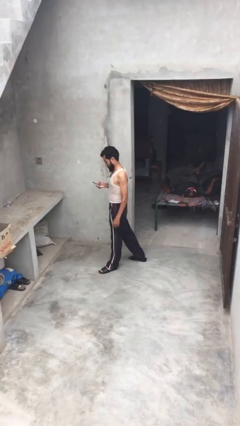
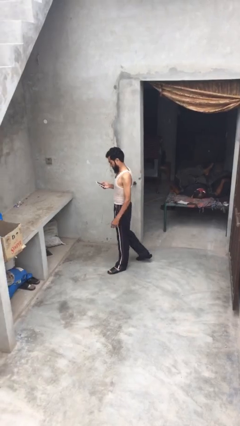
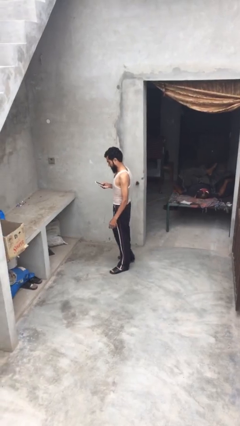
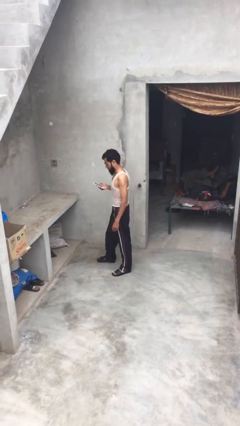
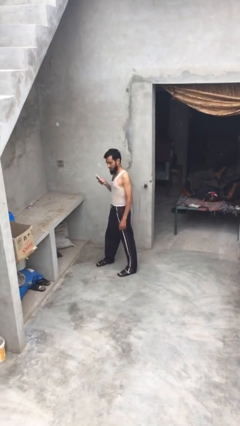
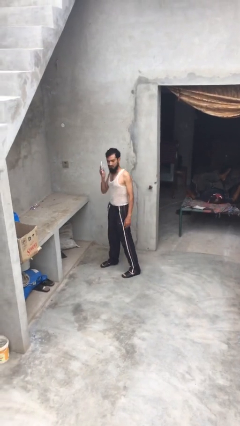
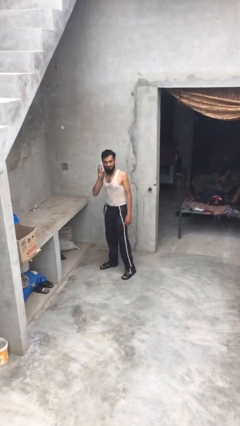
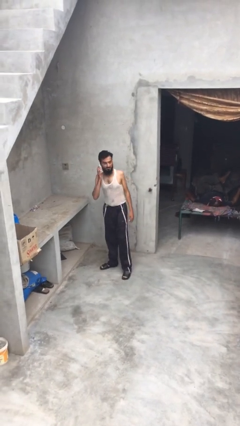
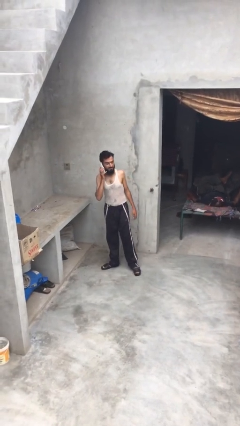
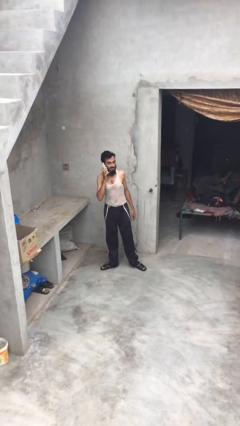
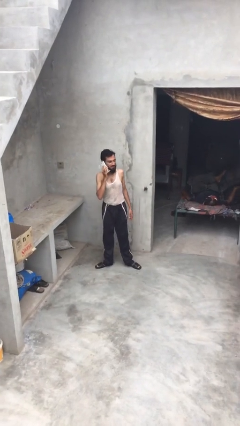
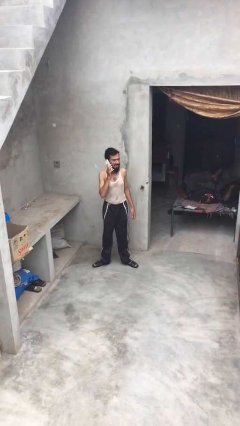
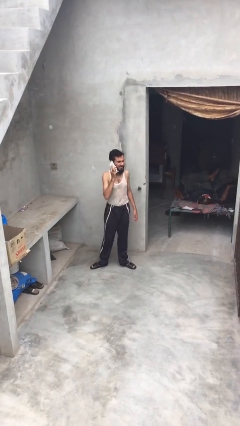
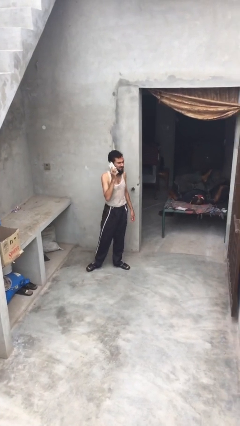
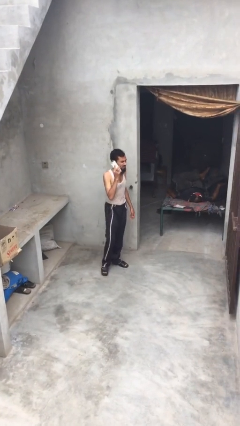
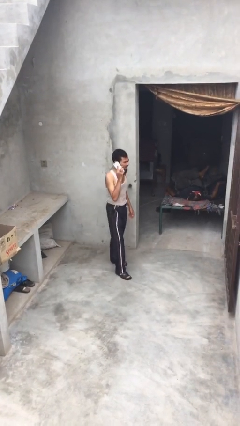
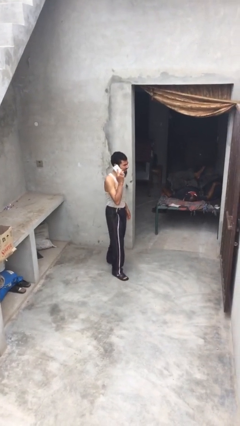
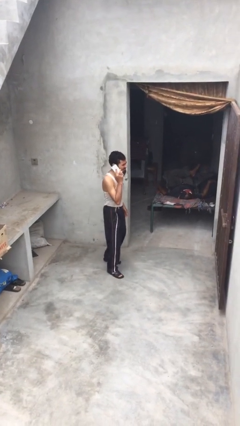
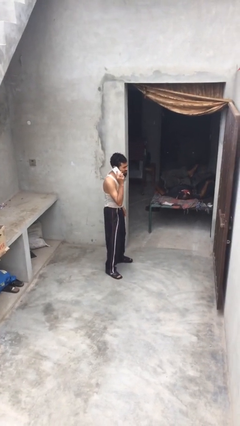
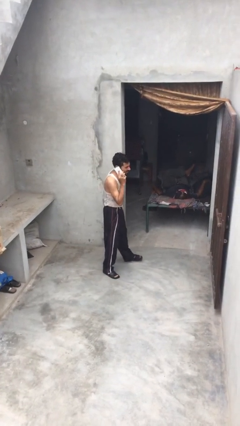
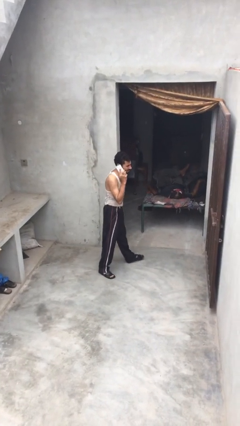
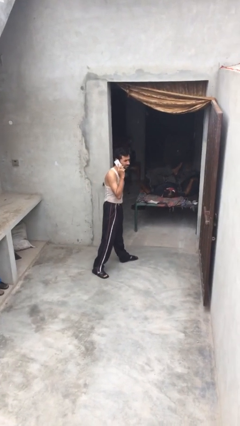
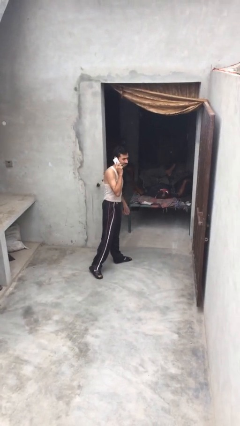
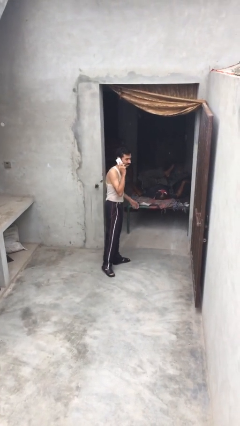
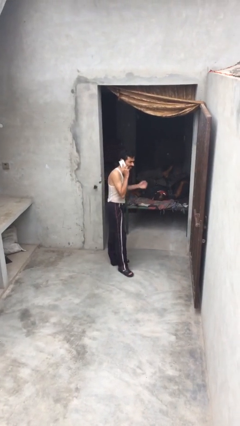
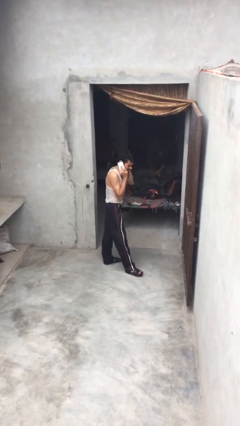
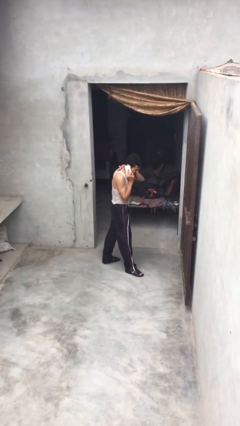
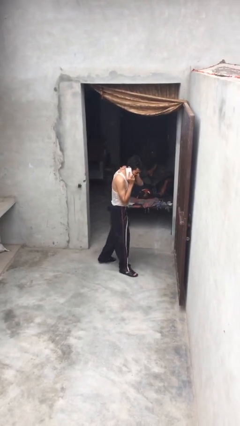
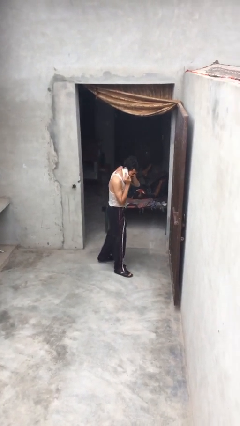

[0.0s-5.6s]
person talks on phone

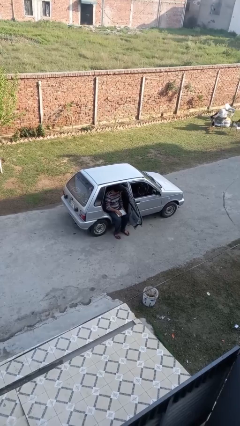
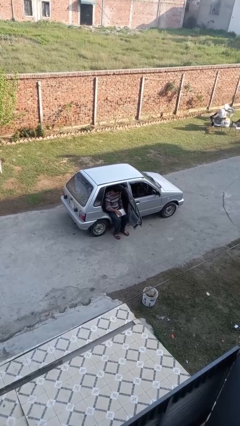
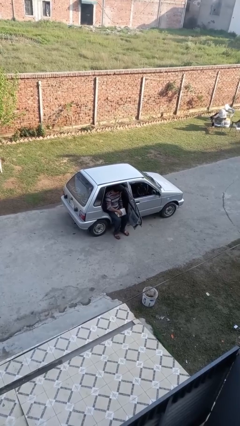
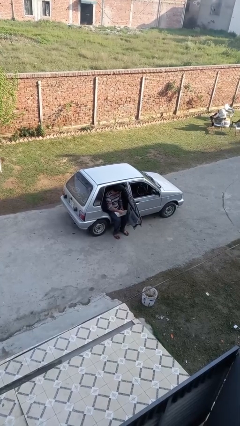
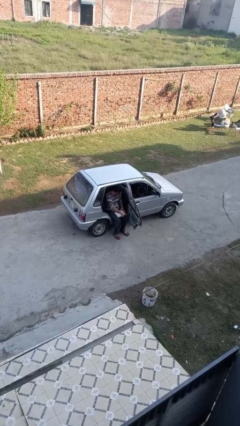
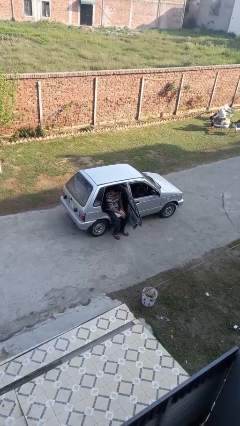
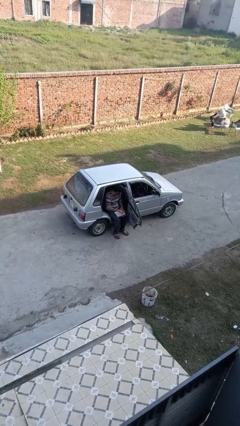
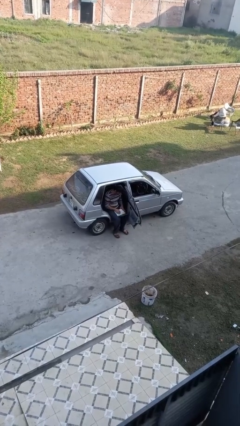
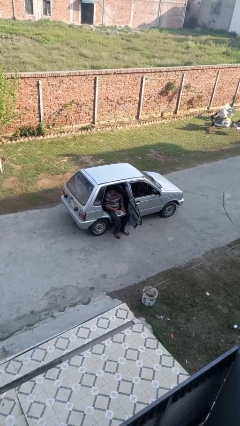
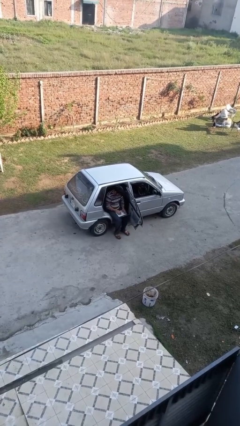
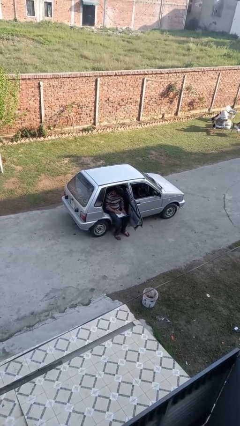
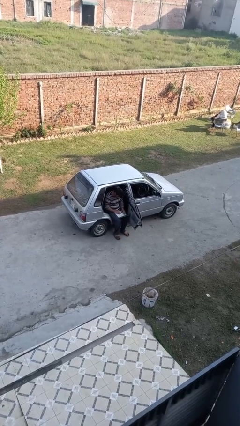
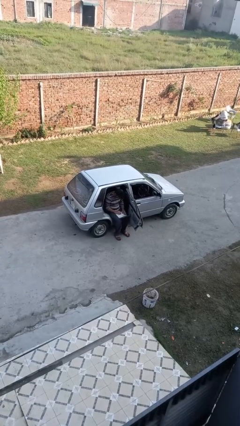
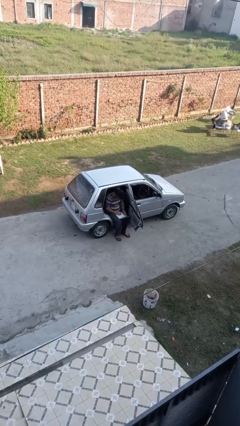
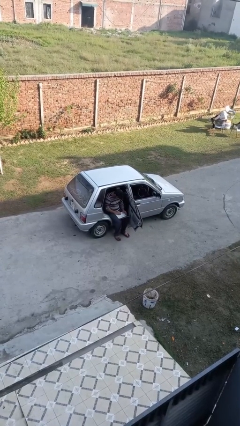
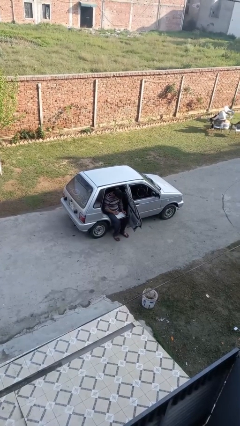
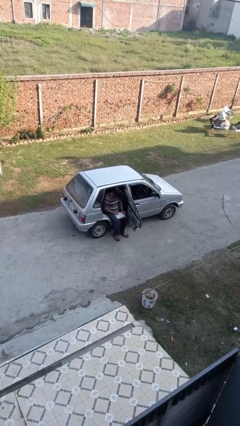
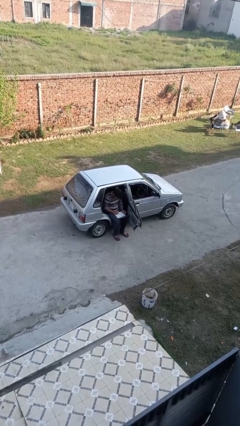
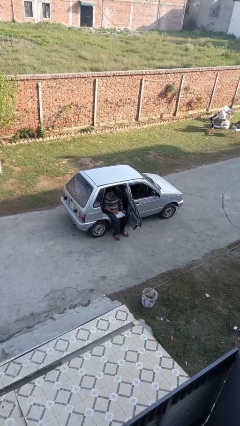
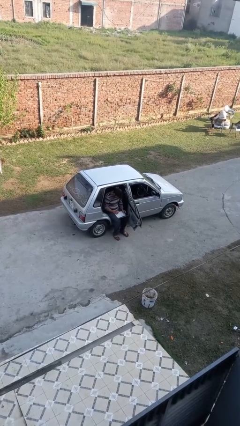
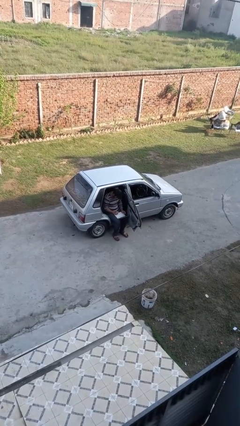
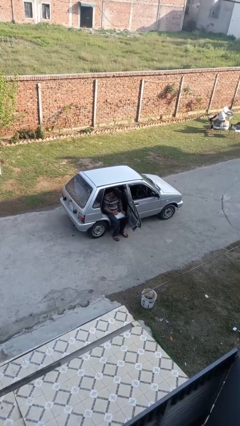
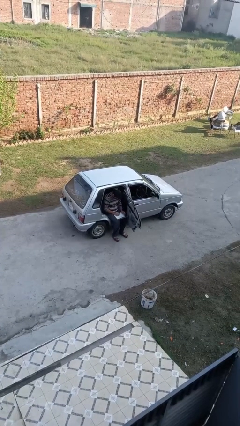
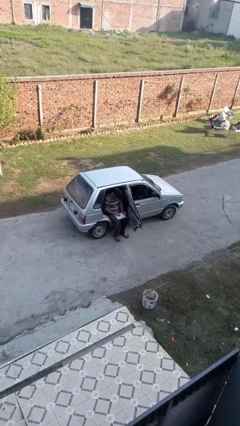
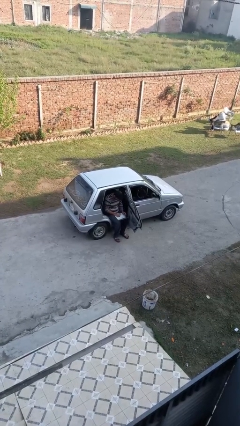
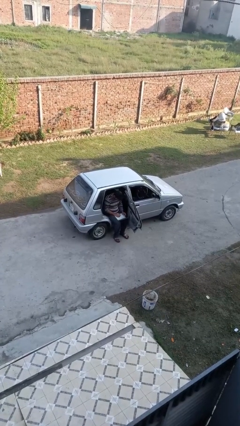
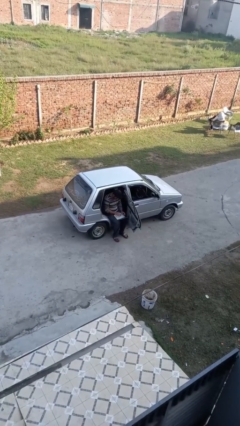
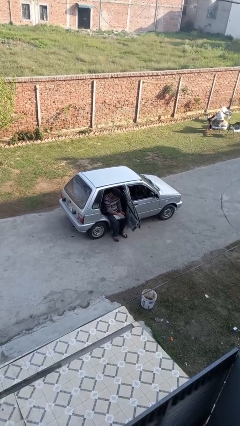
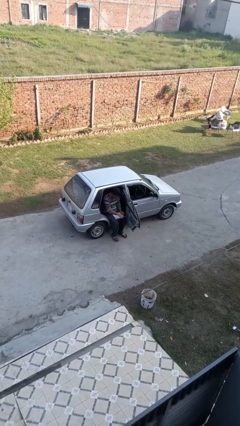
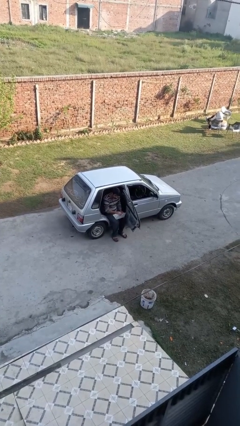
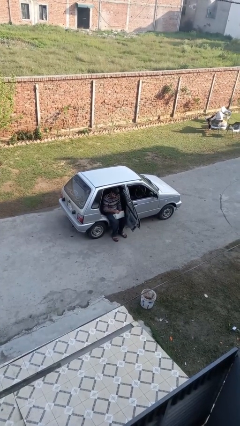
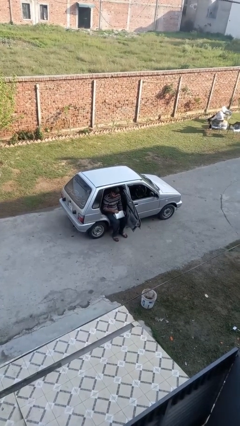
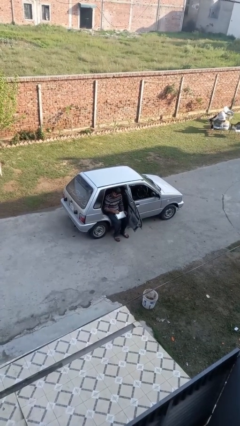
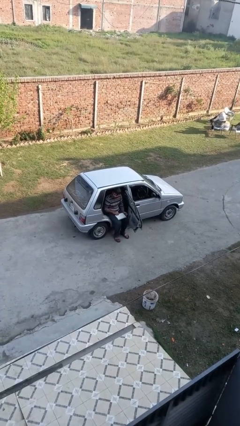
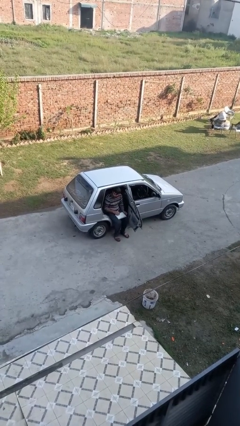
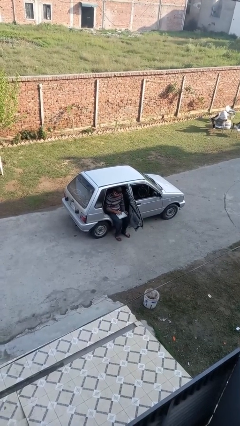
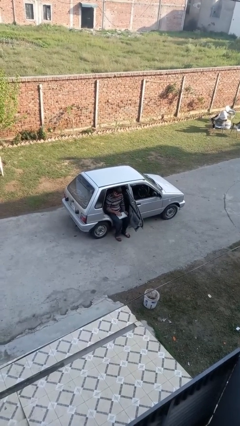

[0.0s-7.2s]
person interacts with laptop

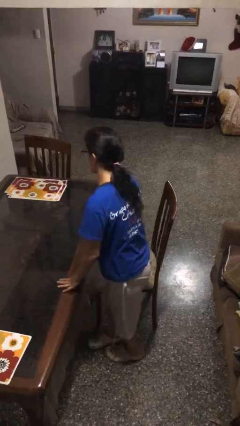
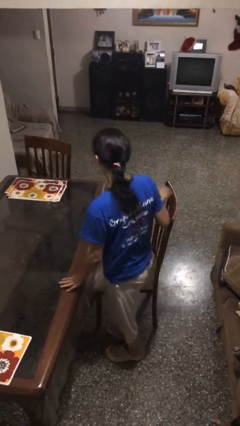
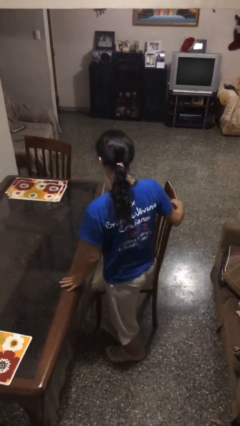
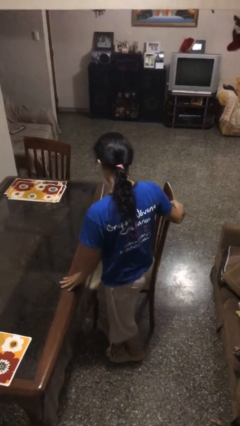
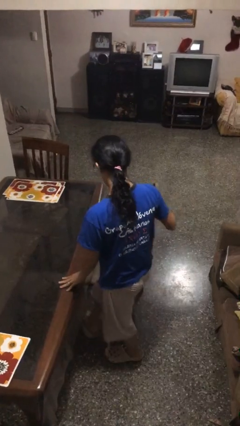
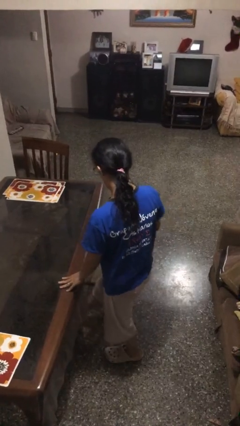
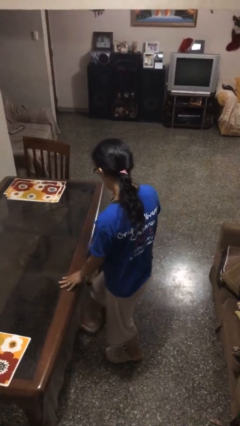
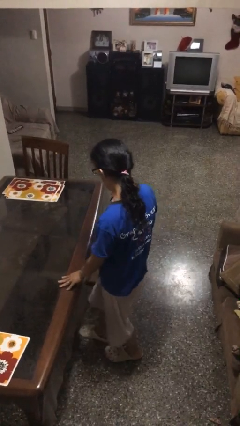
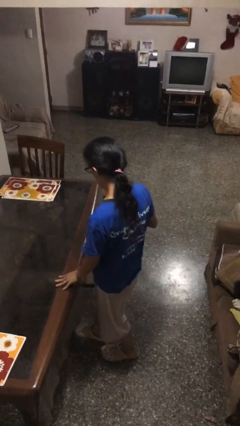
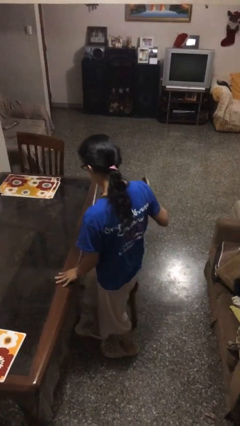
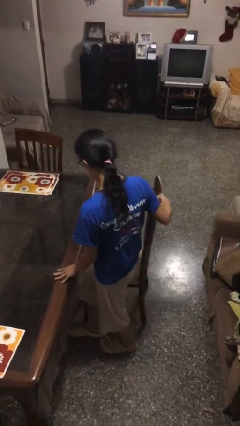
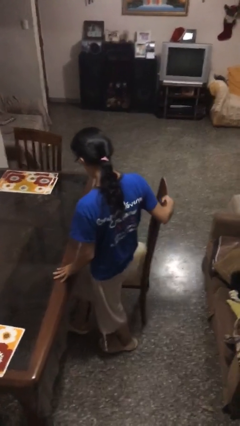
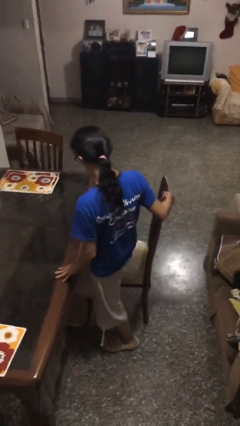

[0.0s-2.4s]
person stands up

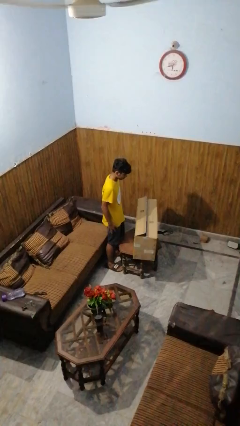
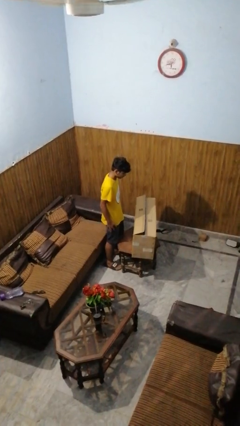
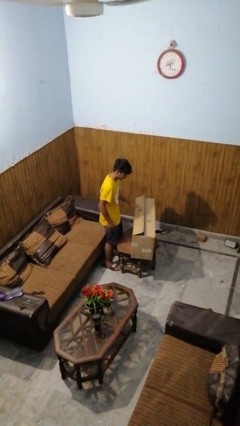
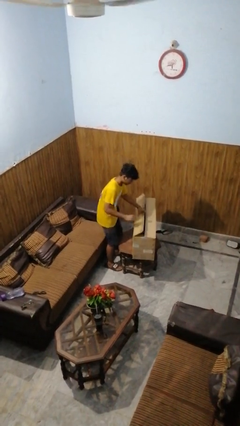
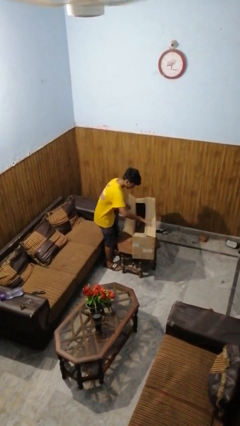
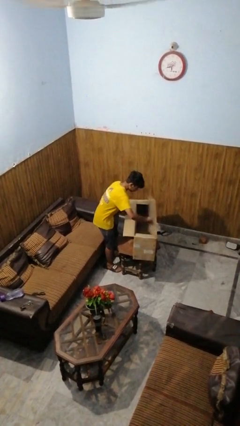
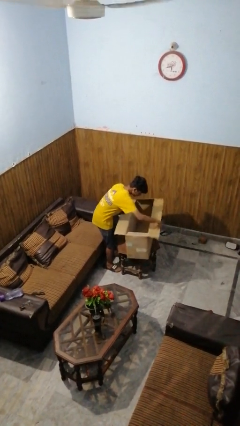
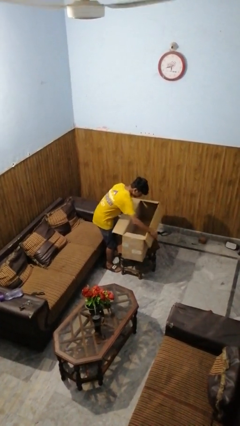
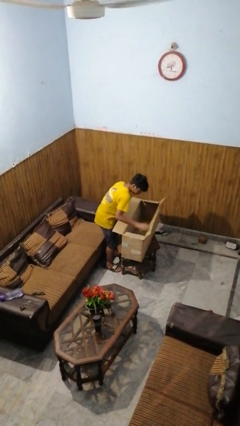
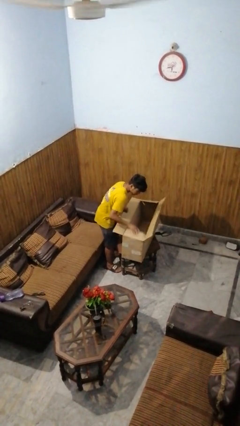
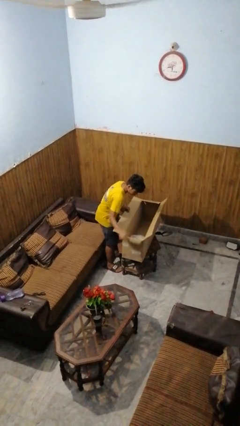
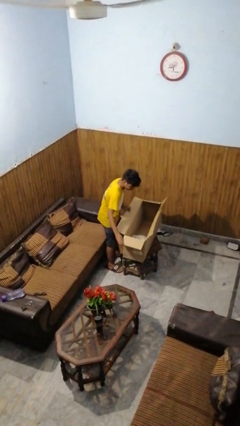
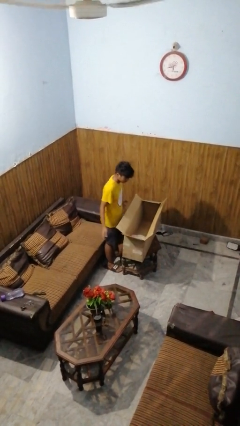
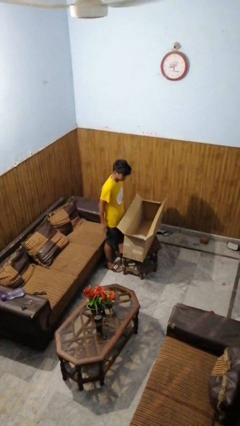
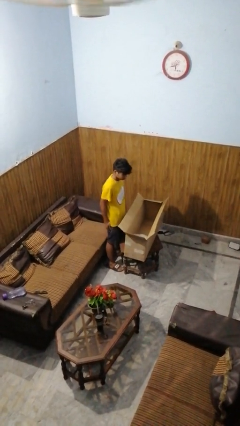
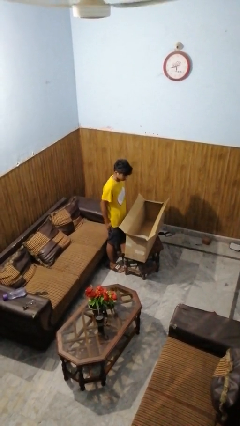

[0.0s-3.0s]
person opens box
